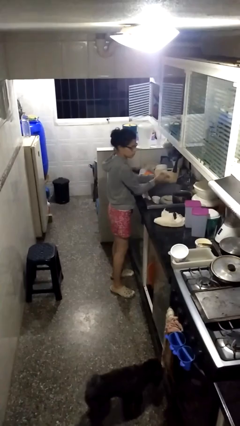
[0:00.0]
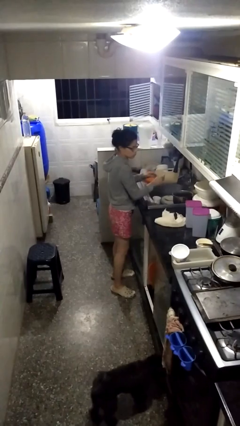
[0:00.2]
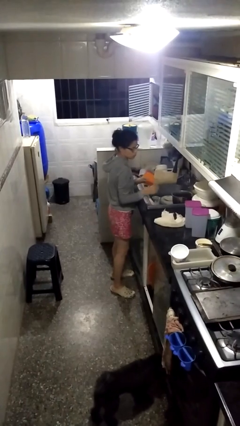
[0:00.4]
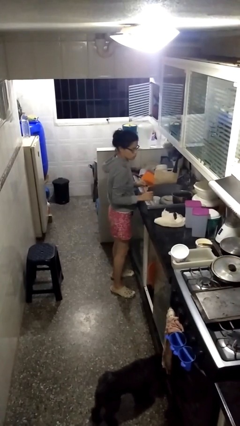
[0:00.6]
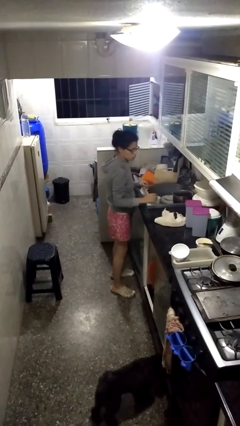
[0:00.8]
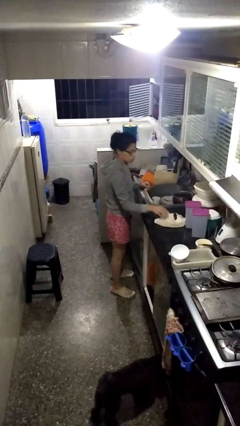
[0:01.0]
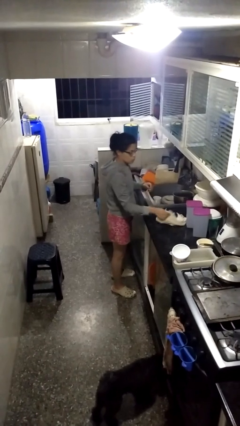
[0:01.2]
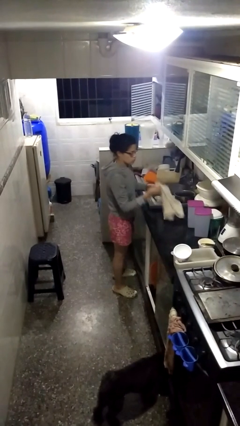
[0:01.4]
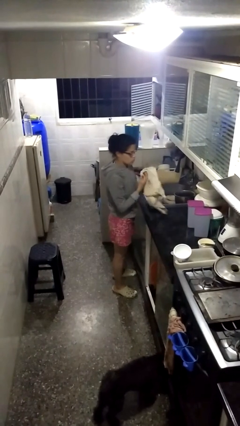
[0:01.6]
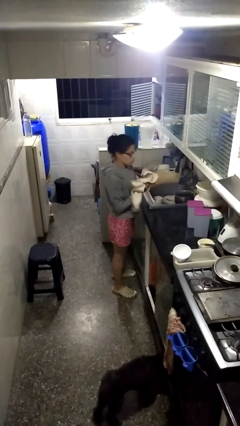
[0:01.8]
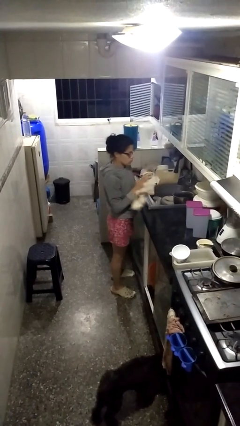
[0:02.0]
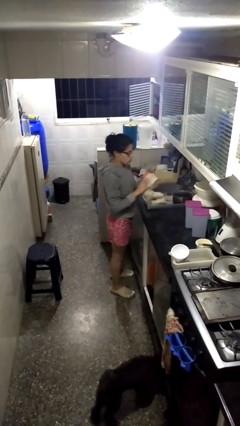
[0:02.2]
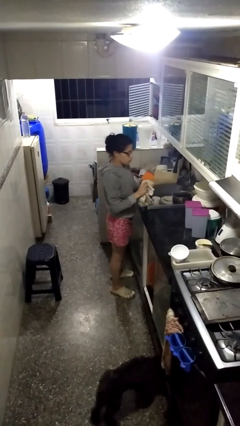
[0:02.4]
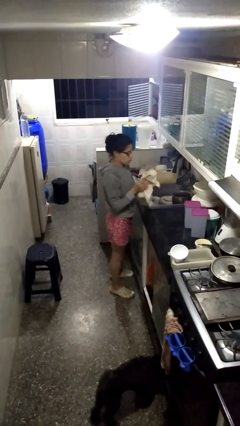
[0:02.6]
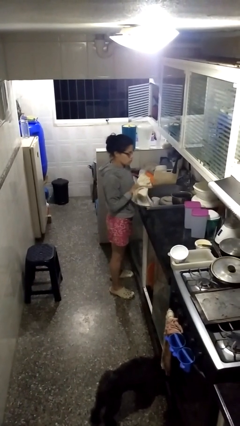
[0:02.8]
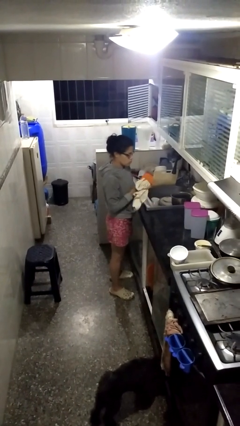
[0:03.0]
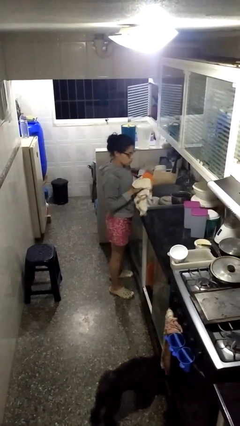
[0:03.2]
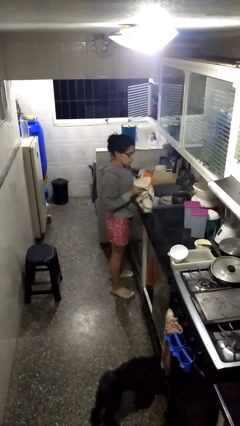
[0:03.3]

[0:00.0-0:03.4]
person dries hands with towel

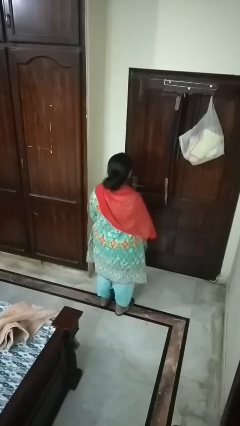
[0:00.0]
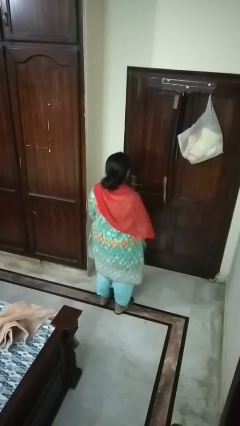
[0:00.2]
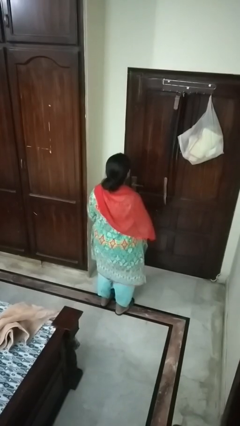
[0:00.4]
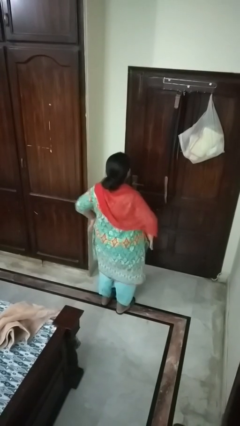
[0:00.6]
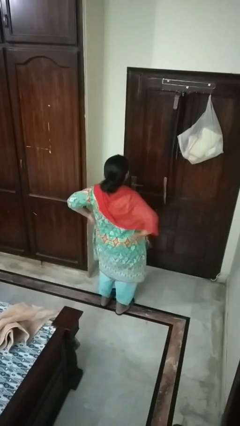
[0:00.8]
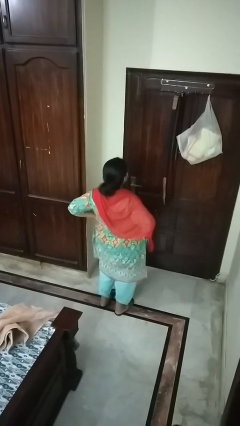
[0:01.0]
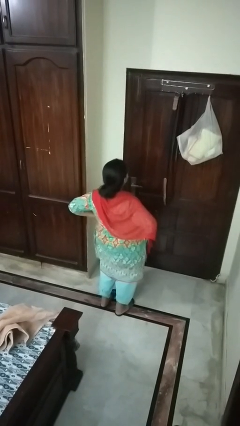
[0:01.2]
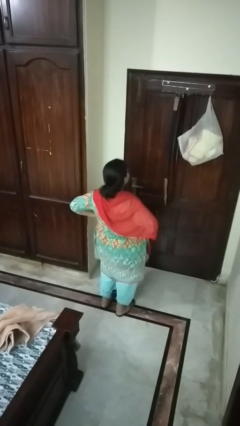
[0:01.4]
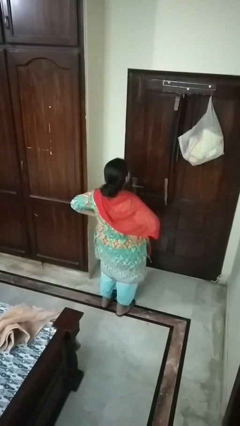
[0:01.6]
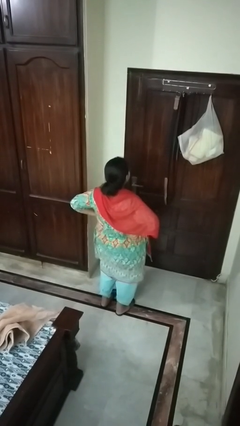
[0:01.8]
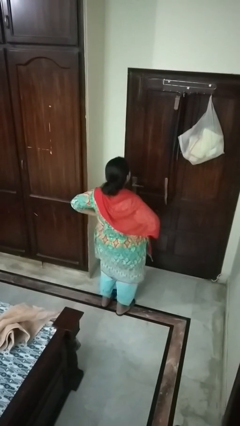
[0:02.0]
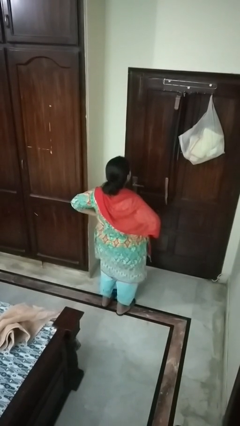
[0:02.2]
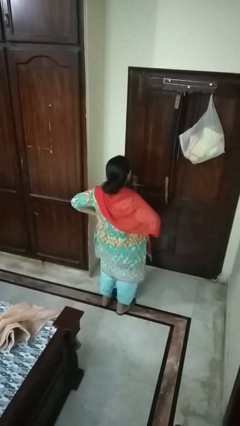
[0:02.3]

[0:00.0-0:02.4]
person stretches back

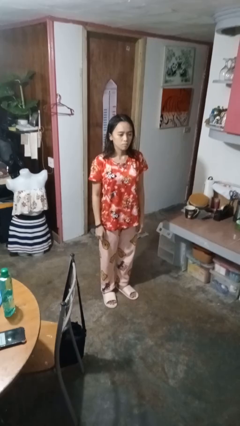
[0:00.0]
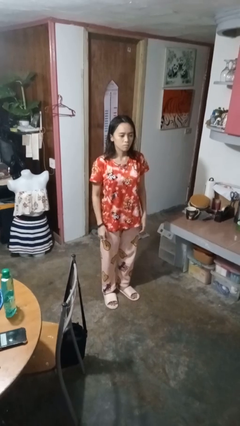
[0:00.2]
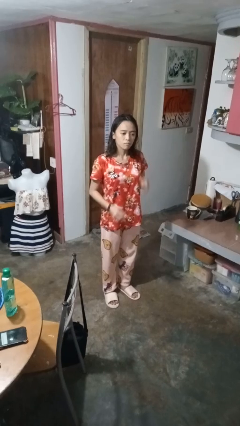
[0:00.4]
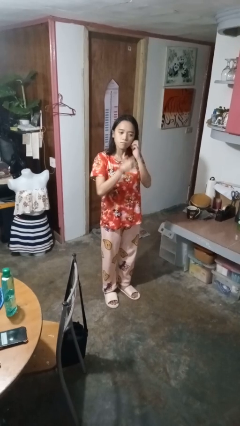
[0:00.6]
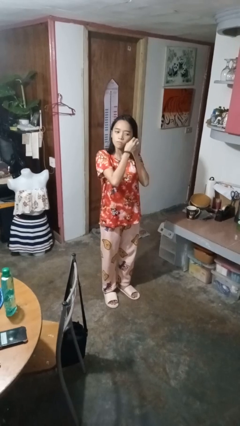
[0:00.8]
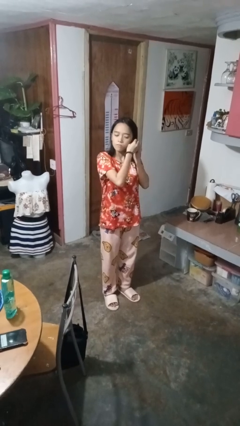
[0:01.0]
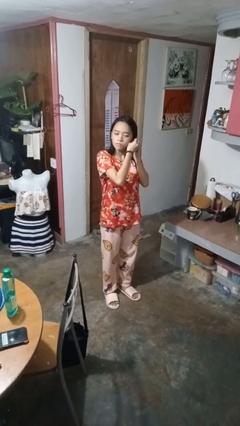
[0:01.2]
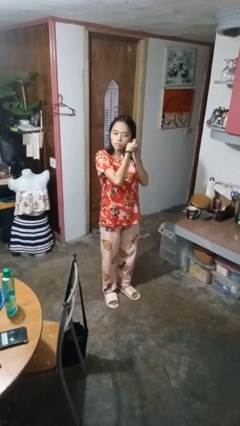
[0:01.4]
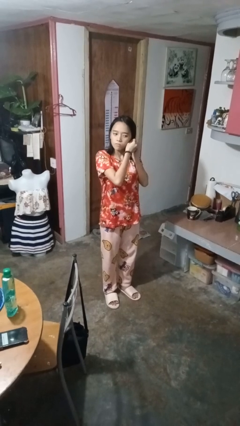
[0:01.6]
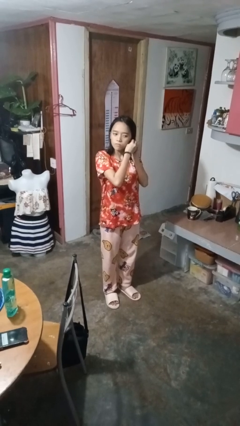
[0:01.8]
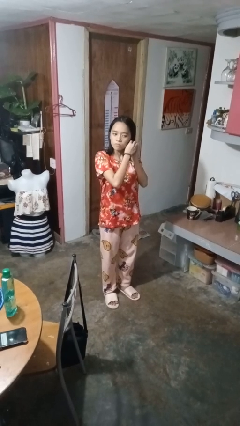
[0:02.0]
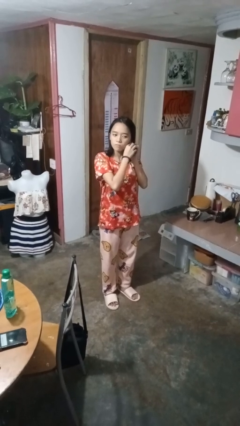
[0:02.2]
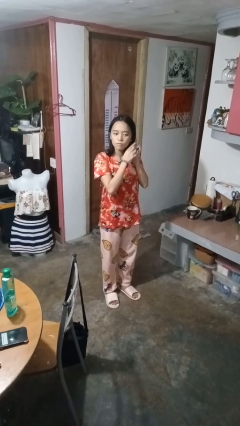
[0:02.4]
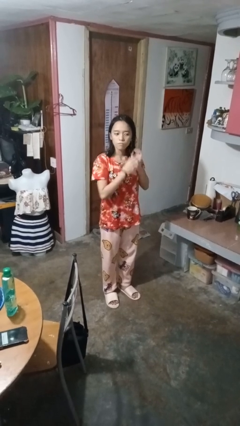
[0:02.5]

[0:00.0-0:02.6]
person puts on earrings

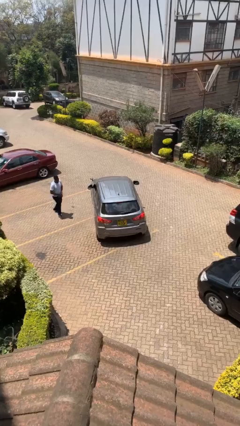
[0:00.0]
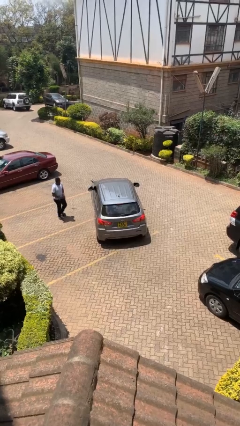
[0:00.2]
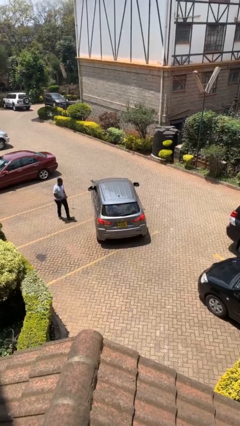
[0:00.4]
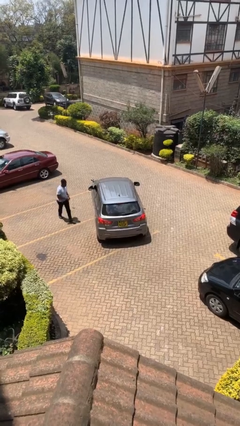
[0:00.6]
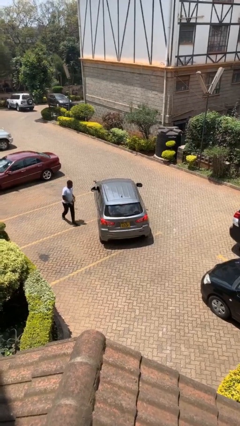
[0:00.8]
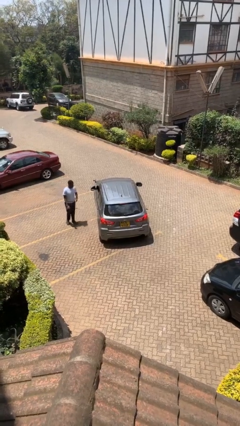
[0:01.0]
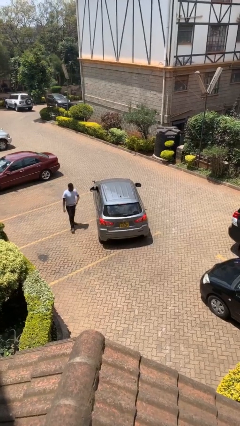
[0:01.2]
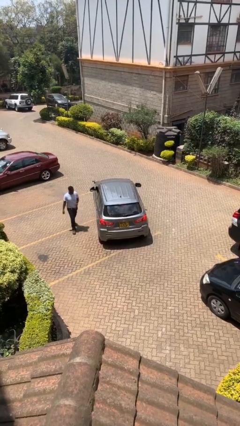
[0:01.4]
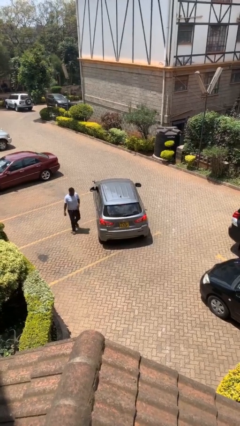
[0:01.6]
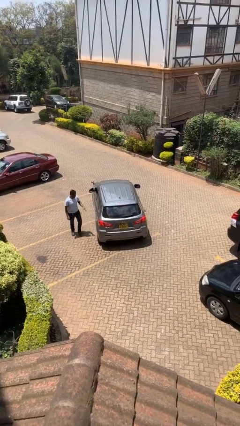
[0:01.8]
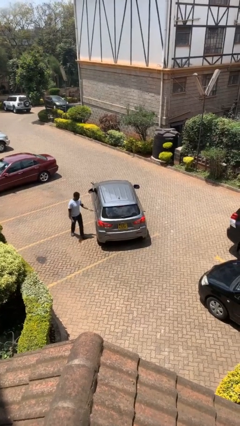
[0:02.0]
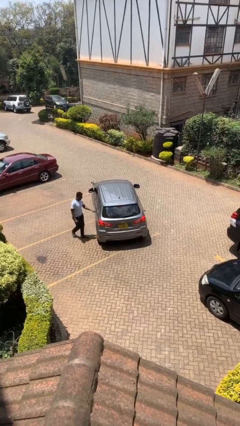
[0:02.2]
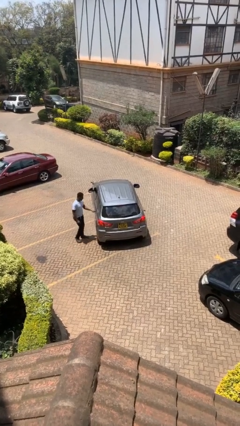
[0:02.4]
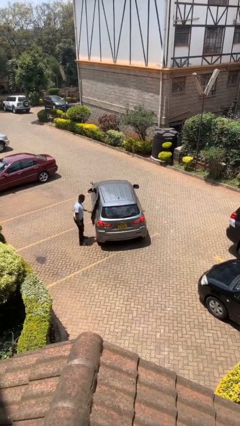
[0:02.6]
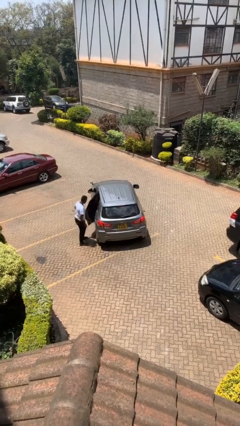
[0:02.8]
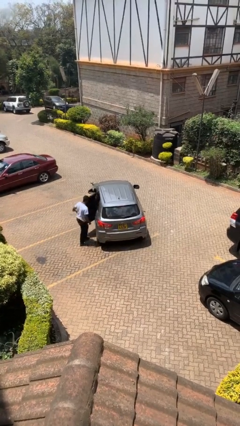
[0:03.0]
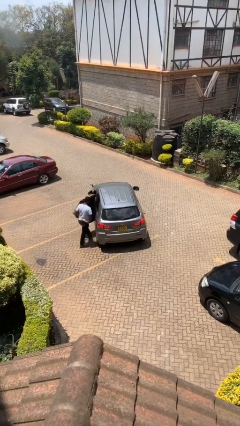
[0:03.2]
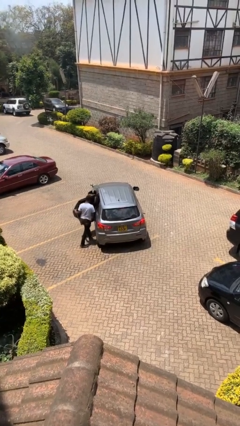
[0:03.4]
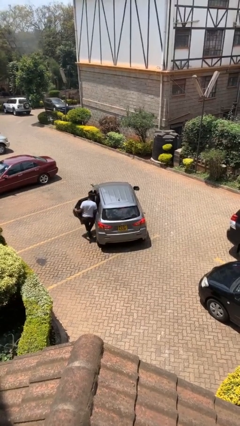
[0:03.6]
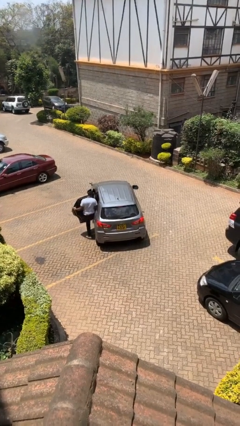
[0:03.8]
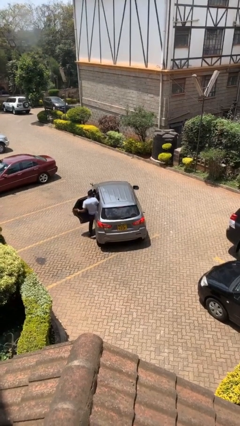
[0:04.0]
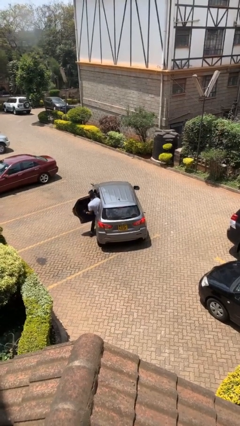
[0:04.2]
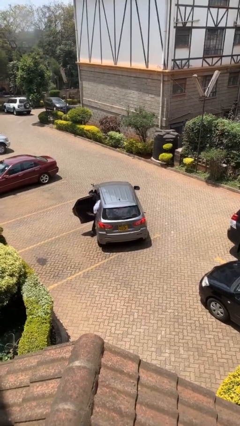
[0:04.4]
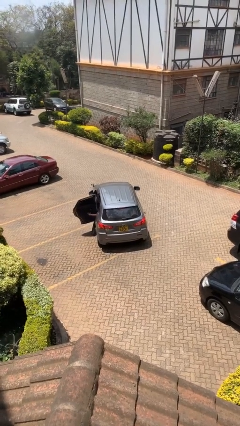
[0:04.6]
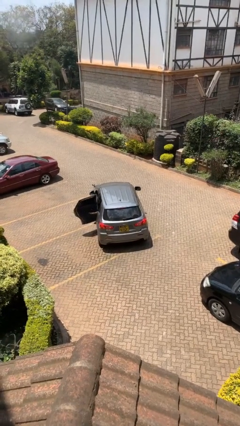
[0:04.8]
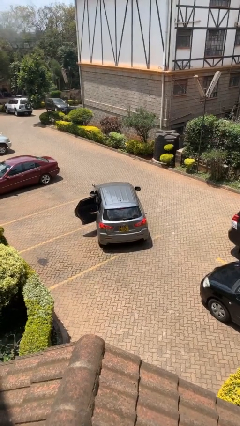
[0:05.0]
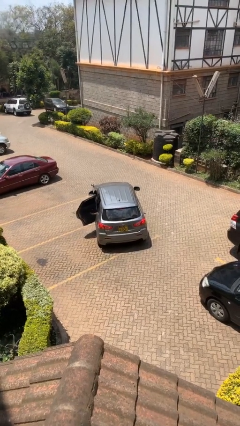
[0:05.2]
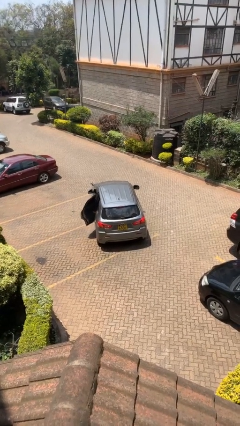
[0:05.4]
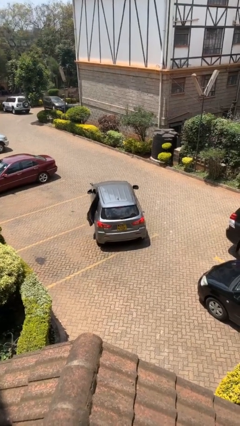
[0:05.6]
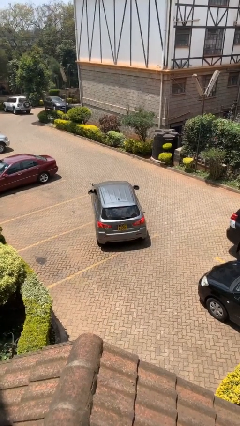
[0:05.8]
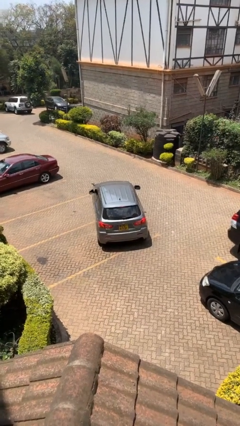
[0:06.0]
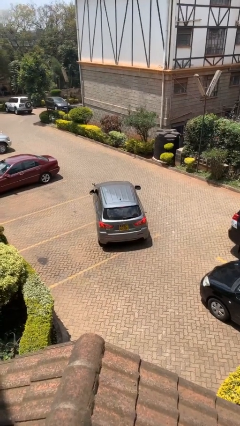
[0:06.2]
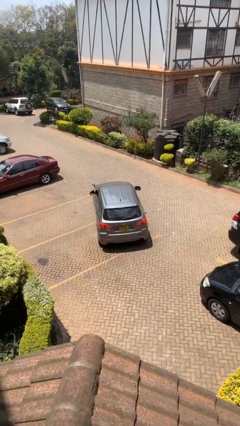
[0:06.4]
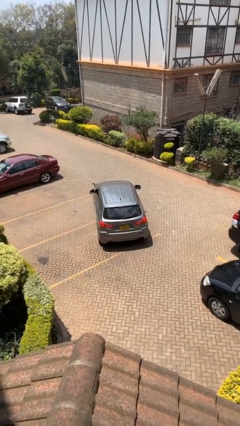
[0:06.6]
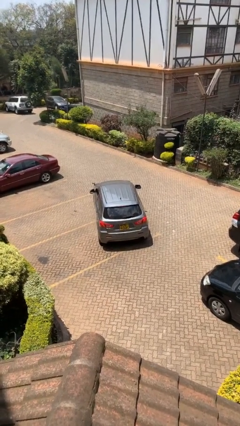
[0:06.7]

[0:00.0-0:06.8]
car picks up person

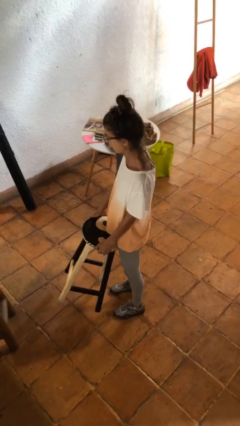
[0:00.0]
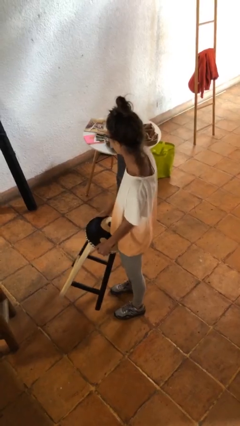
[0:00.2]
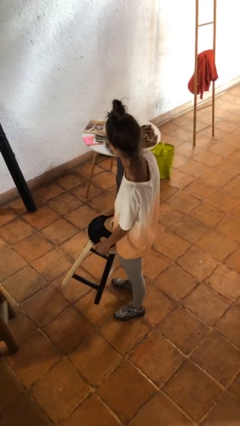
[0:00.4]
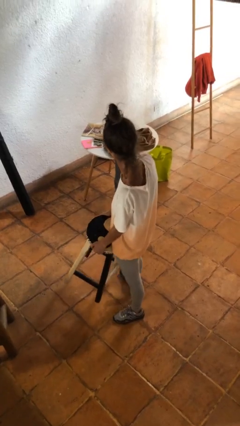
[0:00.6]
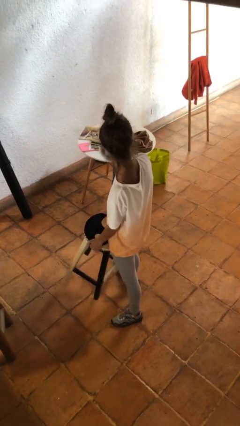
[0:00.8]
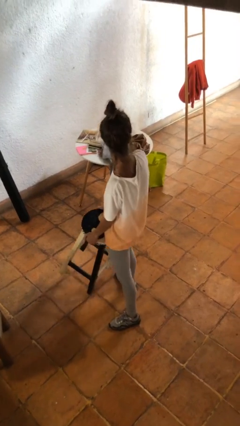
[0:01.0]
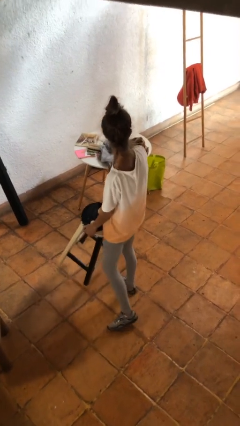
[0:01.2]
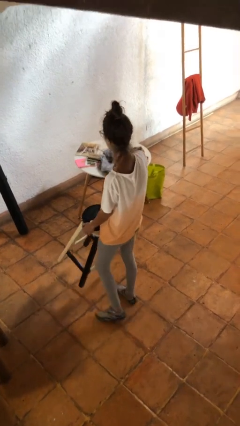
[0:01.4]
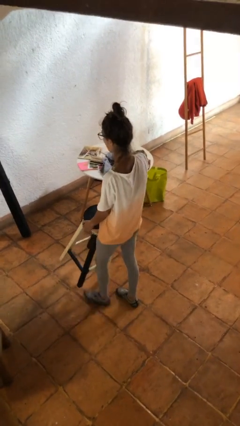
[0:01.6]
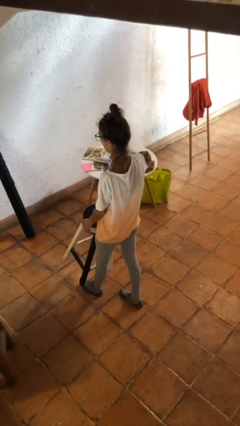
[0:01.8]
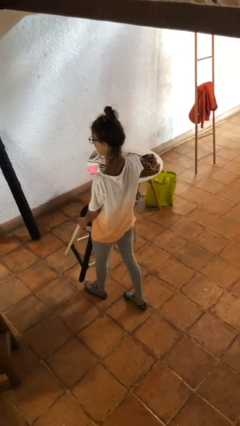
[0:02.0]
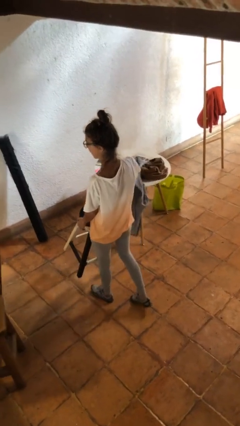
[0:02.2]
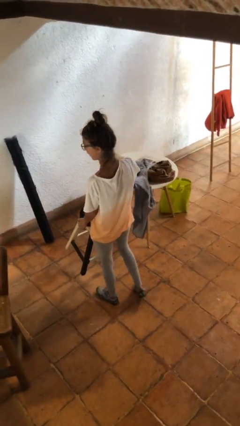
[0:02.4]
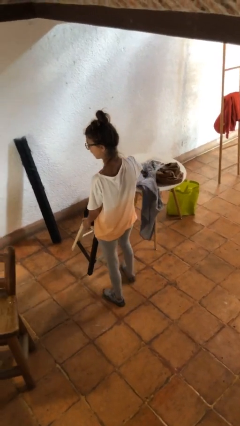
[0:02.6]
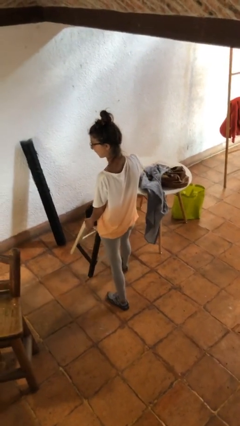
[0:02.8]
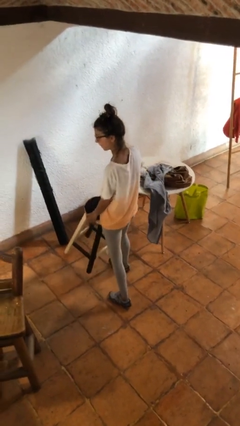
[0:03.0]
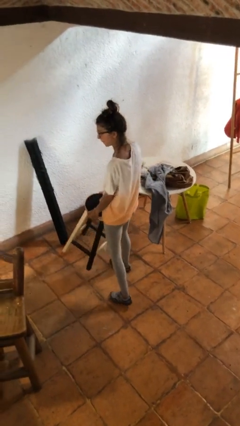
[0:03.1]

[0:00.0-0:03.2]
person carries furniture
